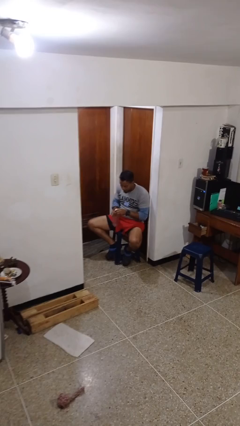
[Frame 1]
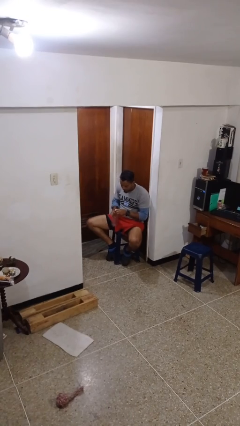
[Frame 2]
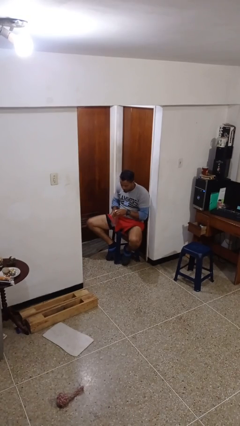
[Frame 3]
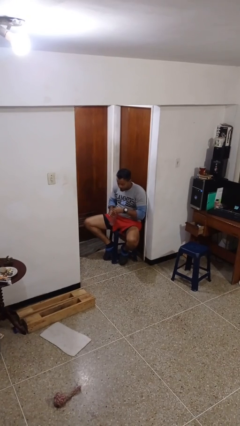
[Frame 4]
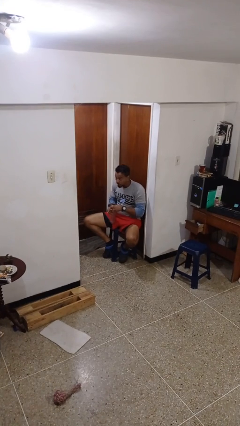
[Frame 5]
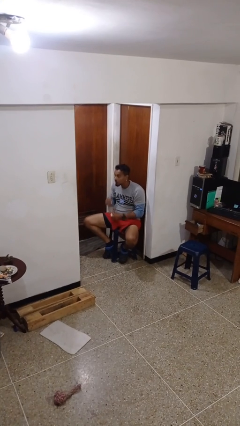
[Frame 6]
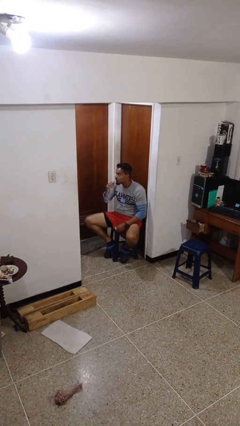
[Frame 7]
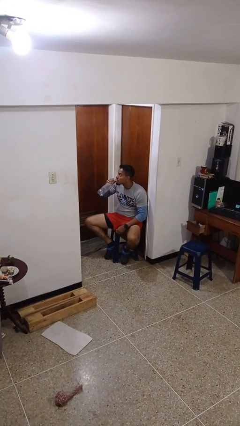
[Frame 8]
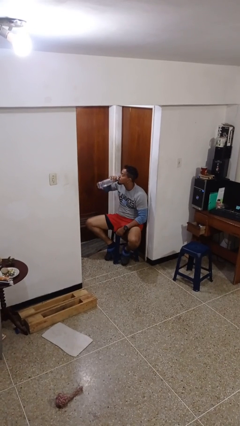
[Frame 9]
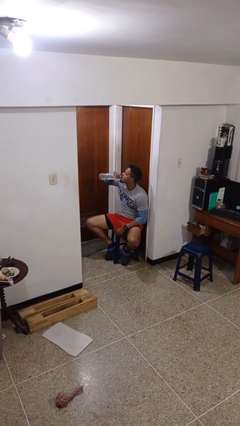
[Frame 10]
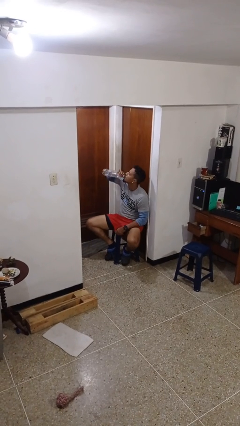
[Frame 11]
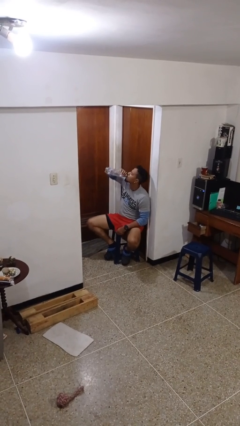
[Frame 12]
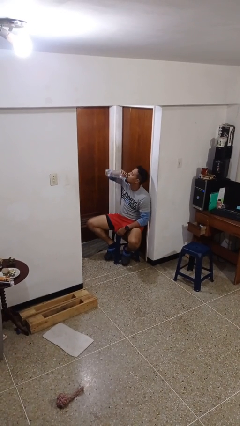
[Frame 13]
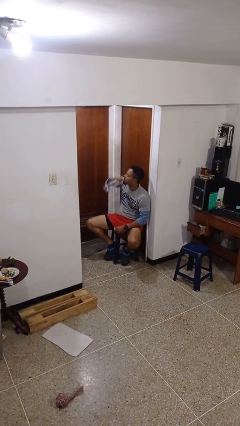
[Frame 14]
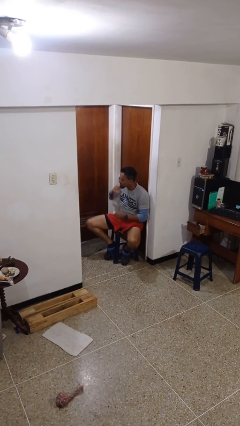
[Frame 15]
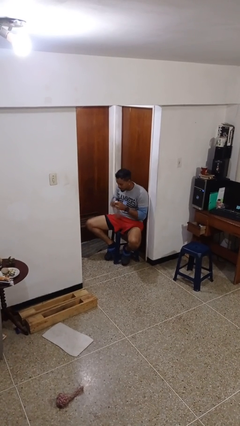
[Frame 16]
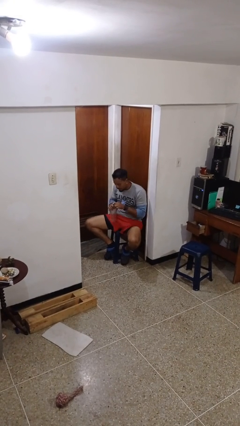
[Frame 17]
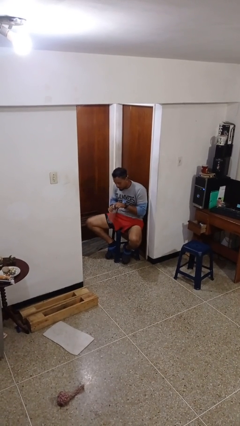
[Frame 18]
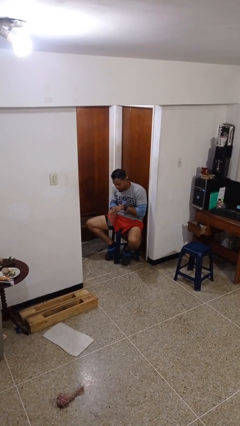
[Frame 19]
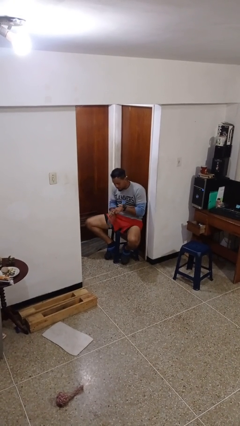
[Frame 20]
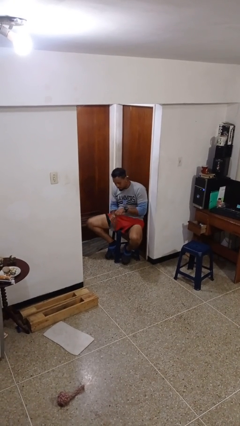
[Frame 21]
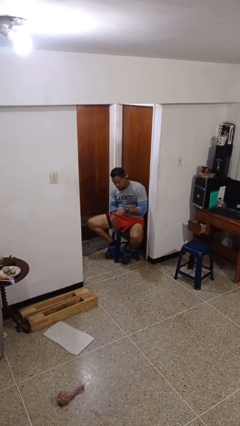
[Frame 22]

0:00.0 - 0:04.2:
person drinks from bottle

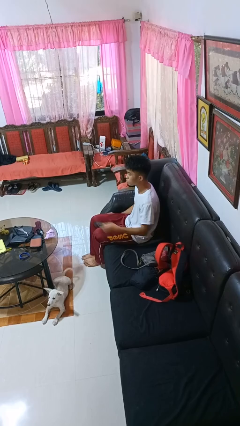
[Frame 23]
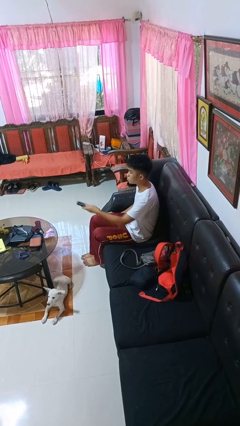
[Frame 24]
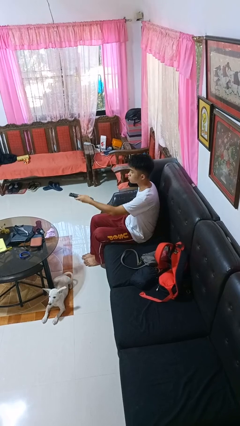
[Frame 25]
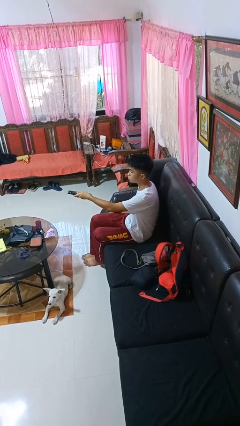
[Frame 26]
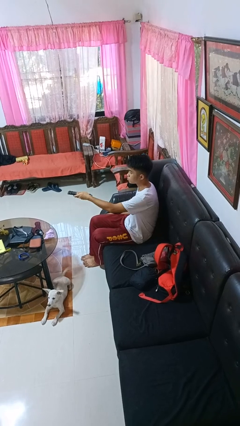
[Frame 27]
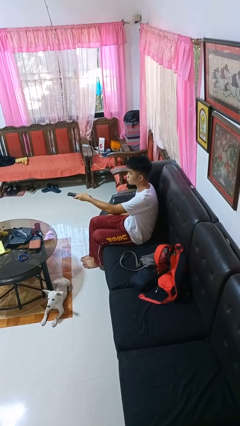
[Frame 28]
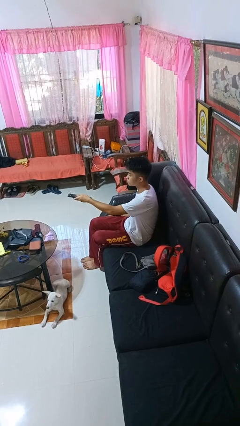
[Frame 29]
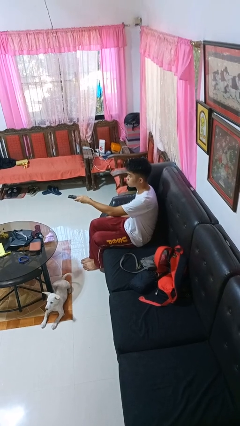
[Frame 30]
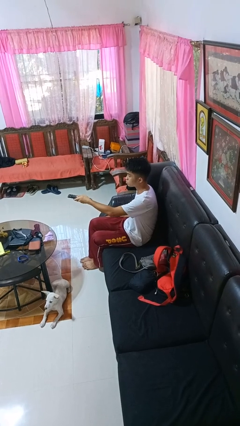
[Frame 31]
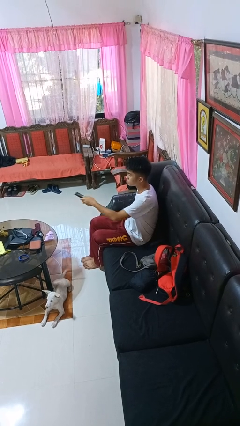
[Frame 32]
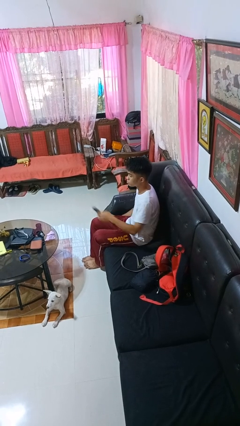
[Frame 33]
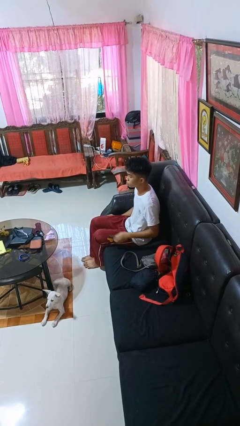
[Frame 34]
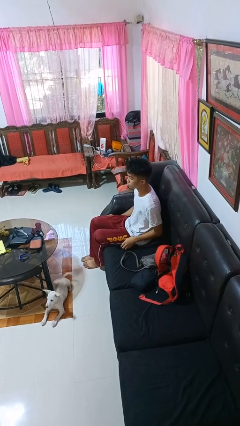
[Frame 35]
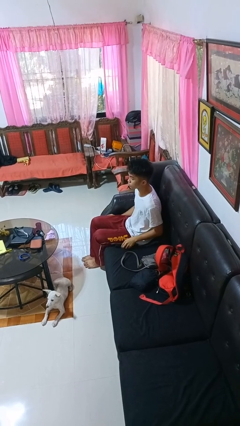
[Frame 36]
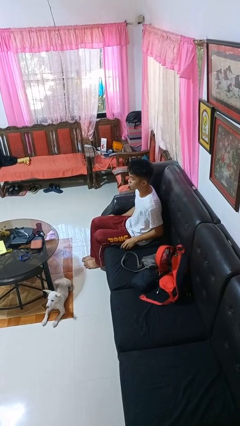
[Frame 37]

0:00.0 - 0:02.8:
person puts down object on shelf

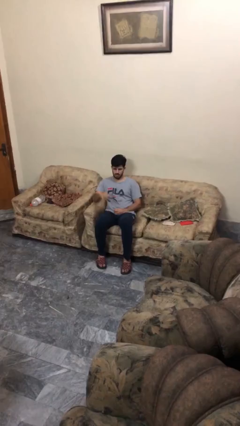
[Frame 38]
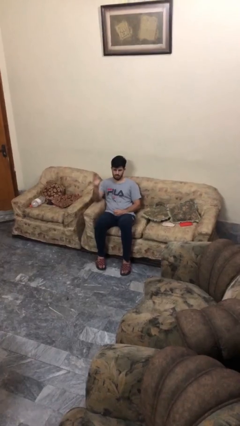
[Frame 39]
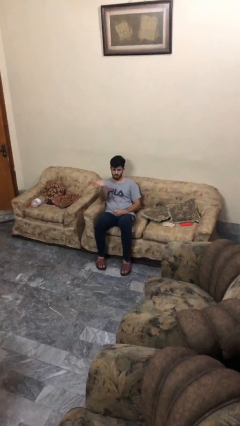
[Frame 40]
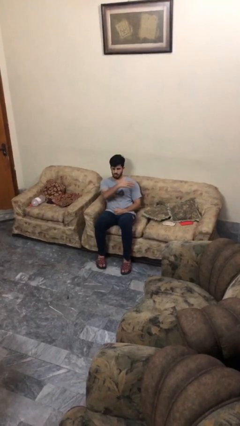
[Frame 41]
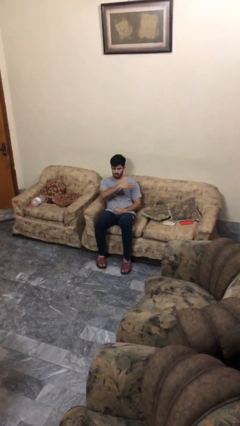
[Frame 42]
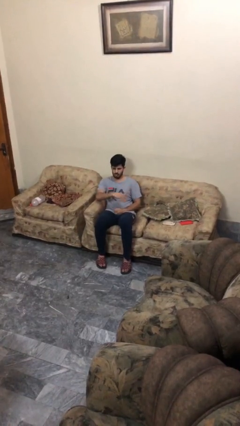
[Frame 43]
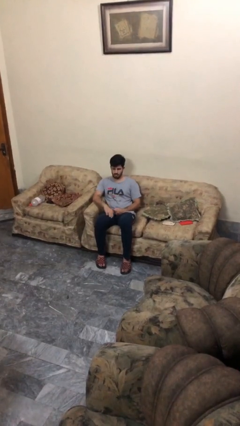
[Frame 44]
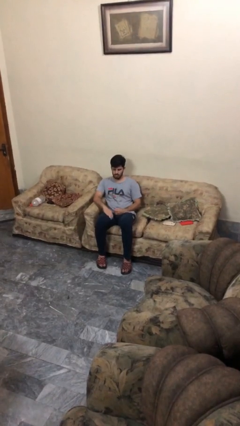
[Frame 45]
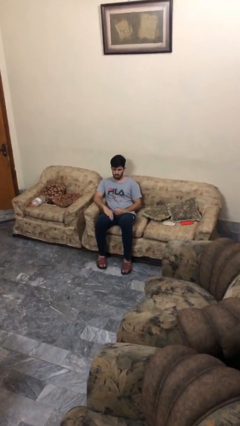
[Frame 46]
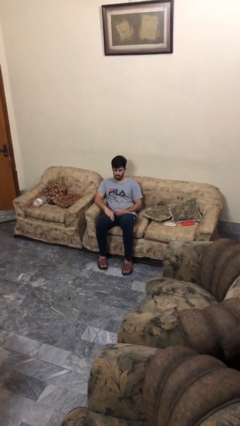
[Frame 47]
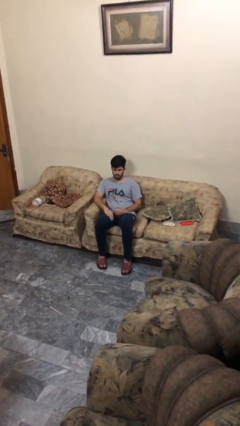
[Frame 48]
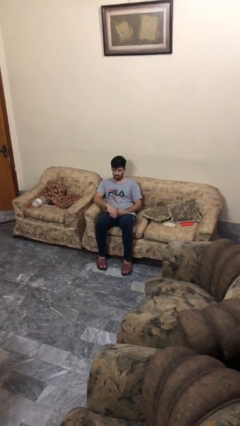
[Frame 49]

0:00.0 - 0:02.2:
person gestures swipe left

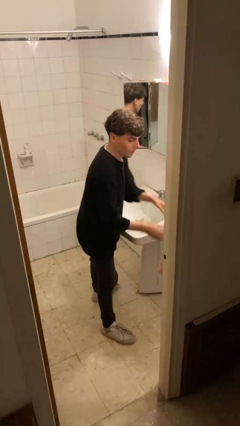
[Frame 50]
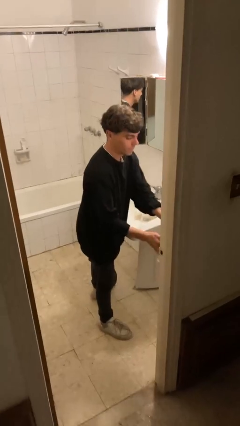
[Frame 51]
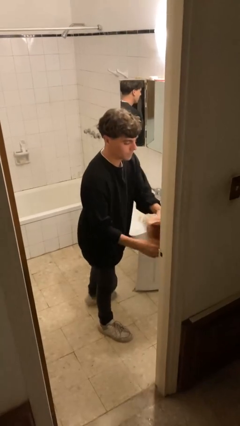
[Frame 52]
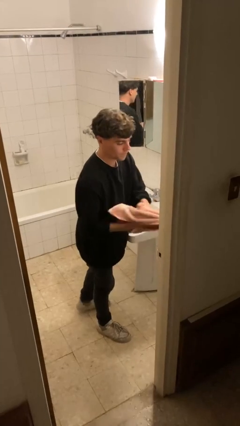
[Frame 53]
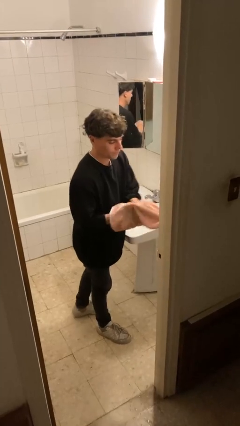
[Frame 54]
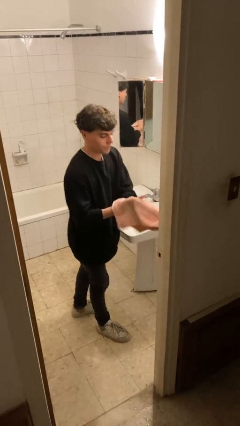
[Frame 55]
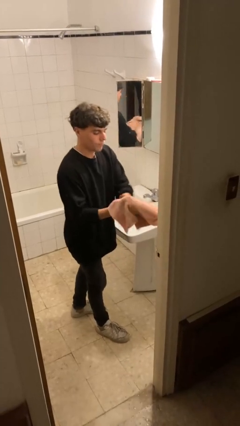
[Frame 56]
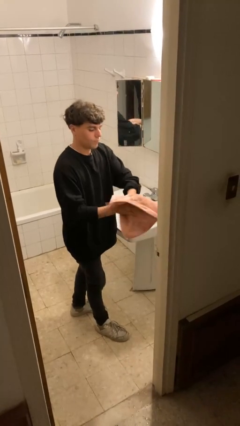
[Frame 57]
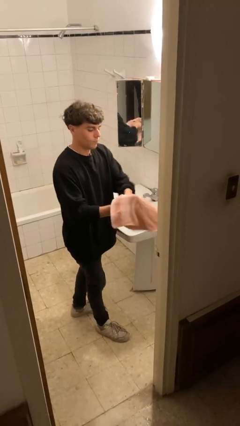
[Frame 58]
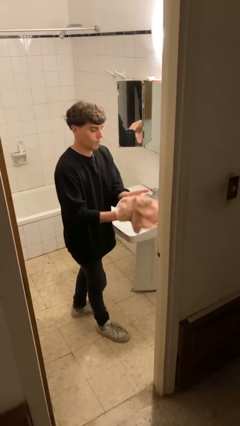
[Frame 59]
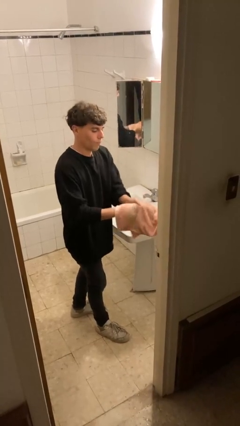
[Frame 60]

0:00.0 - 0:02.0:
person dries hands with towel

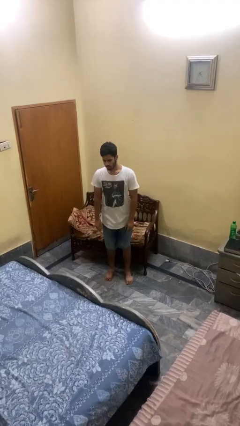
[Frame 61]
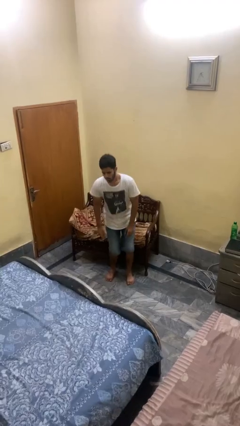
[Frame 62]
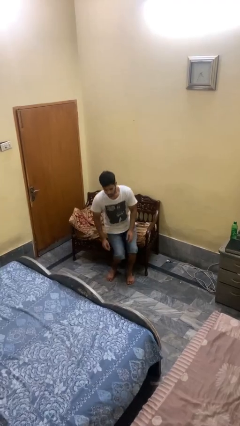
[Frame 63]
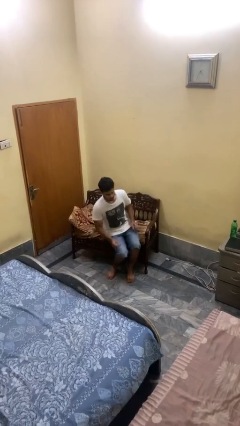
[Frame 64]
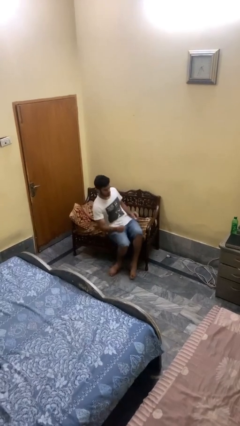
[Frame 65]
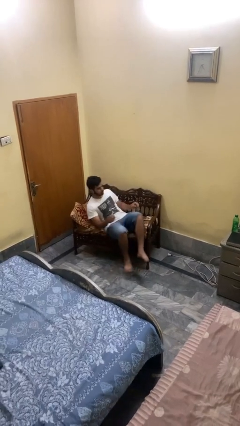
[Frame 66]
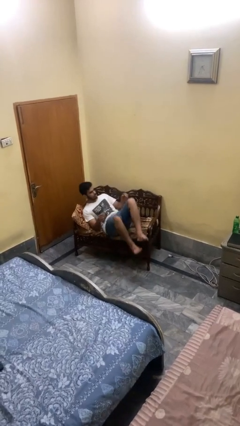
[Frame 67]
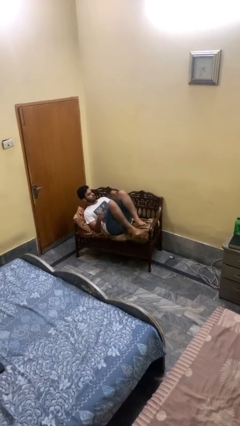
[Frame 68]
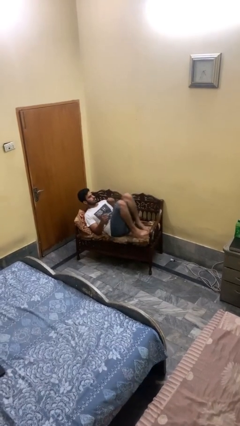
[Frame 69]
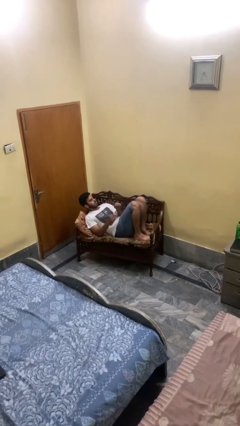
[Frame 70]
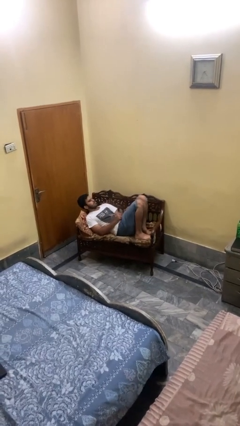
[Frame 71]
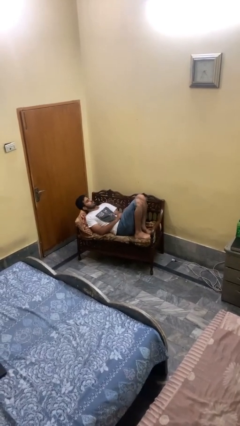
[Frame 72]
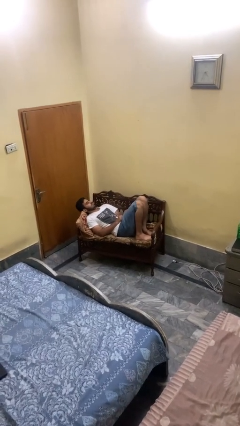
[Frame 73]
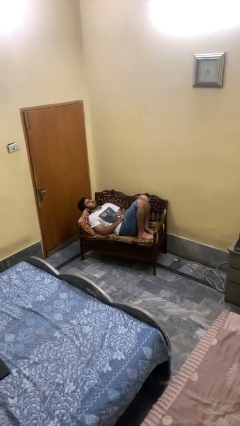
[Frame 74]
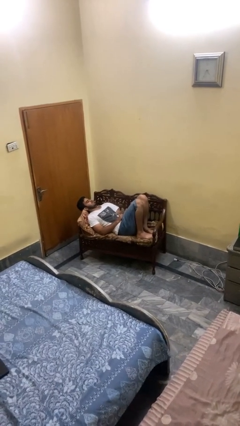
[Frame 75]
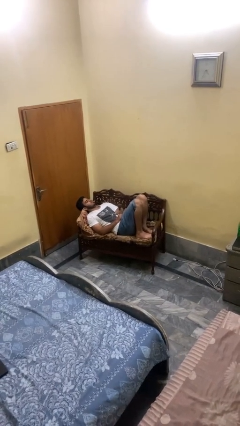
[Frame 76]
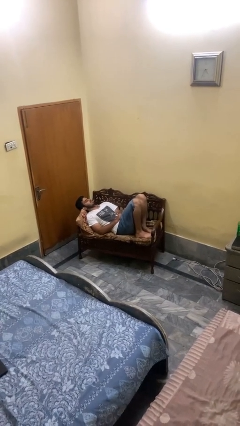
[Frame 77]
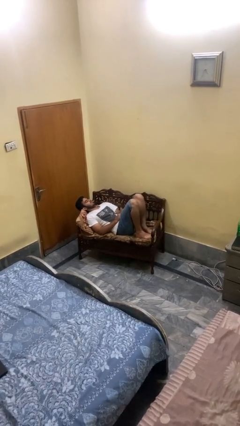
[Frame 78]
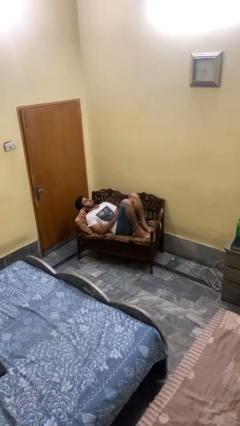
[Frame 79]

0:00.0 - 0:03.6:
person lies down on couch

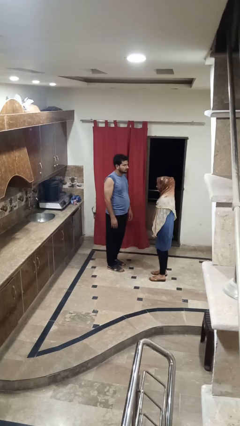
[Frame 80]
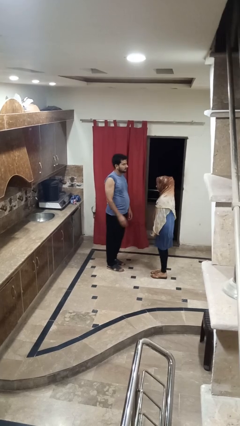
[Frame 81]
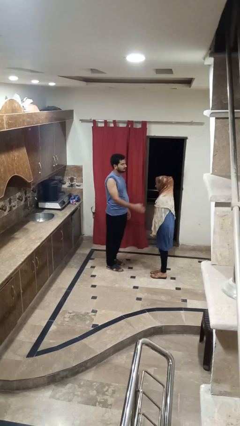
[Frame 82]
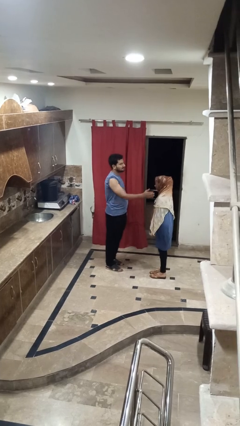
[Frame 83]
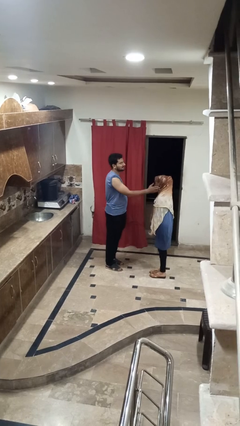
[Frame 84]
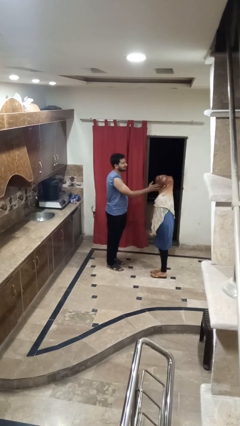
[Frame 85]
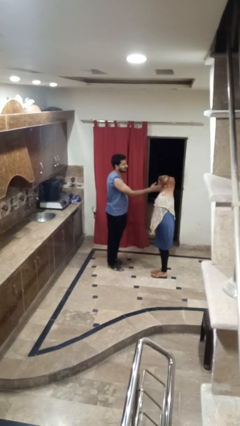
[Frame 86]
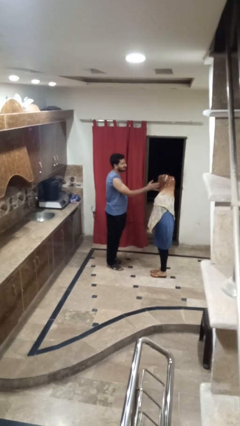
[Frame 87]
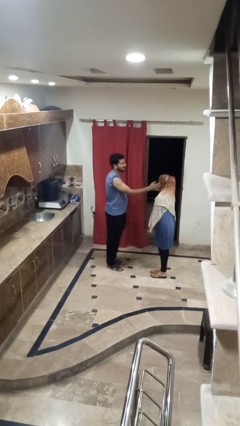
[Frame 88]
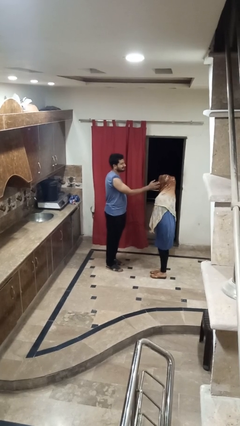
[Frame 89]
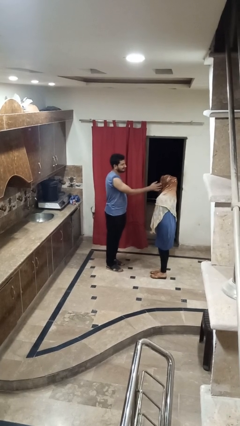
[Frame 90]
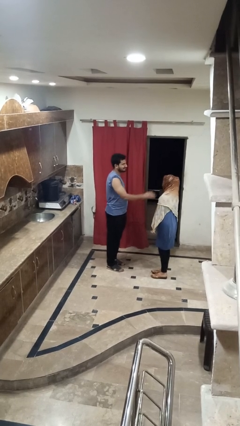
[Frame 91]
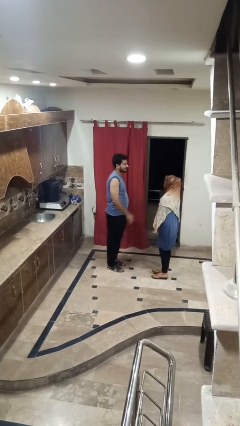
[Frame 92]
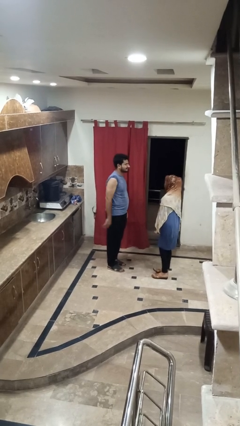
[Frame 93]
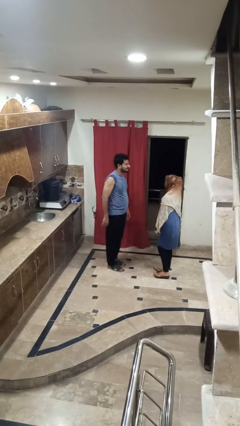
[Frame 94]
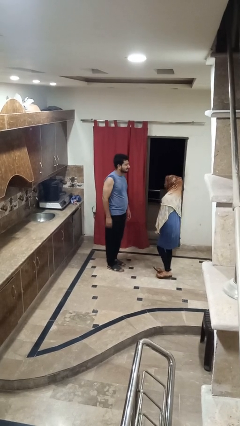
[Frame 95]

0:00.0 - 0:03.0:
person touches face of person
